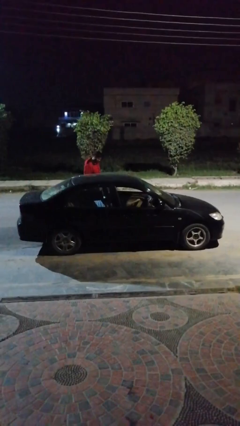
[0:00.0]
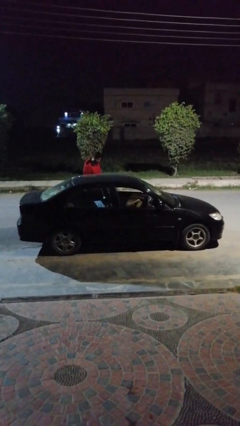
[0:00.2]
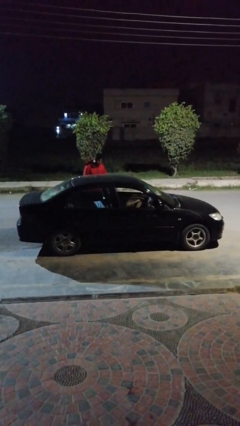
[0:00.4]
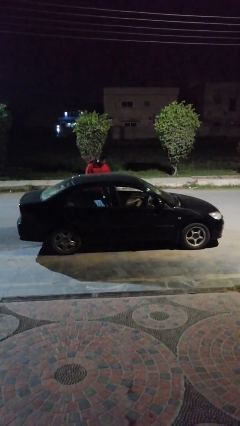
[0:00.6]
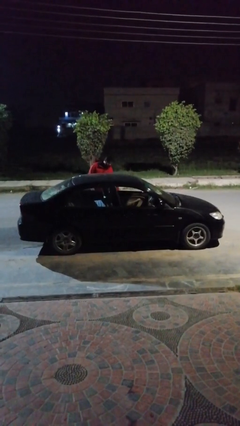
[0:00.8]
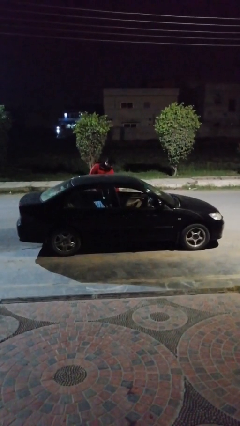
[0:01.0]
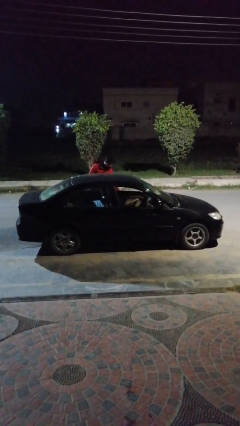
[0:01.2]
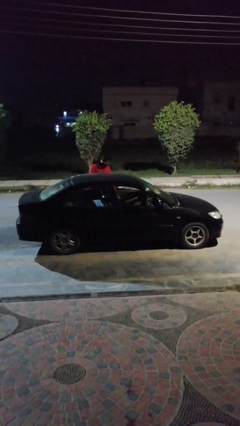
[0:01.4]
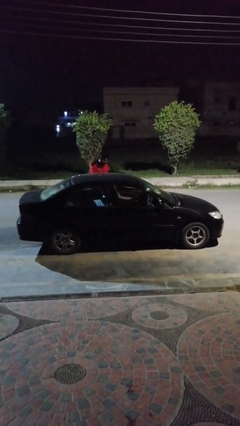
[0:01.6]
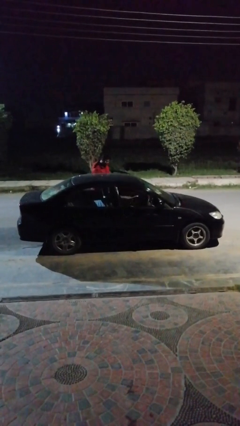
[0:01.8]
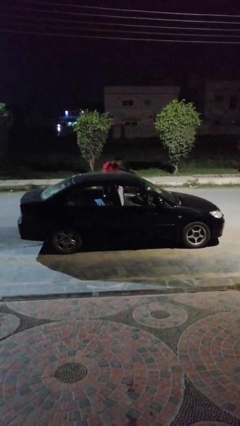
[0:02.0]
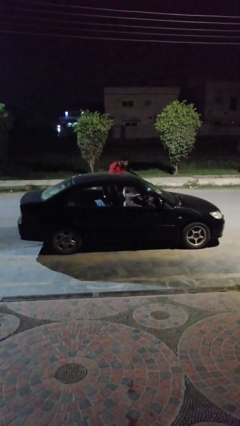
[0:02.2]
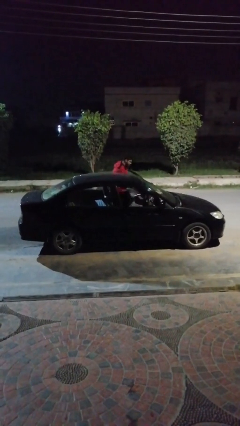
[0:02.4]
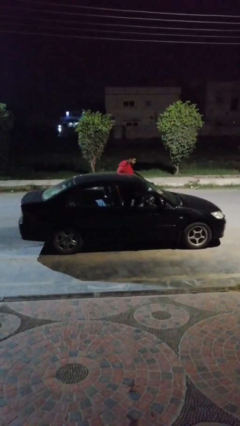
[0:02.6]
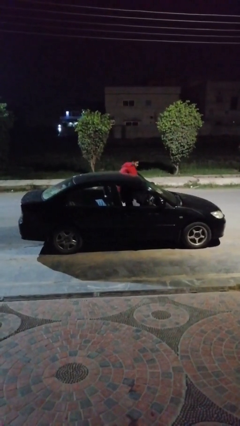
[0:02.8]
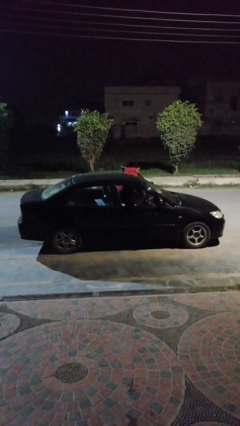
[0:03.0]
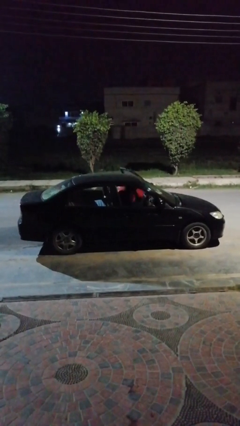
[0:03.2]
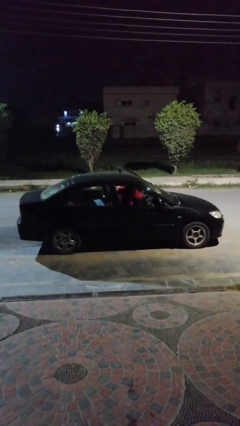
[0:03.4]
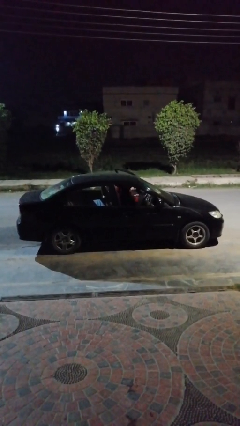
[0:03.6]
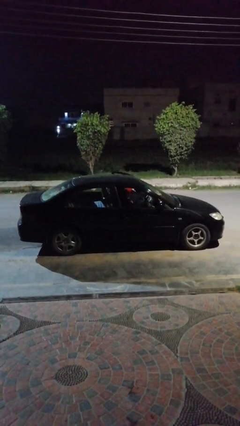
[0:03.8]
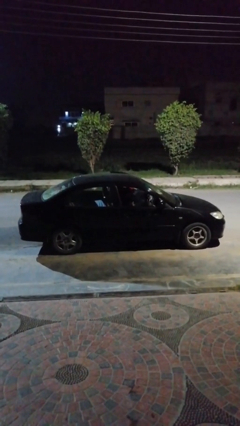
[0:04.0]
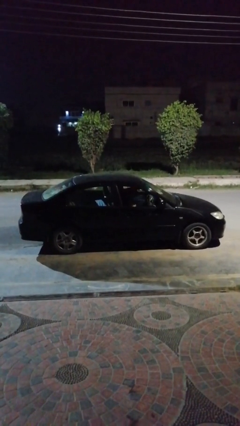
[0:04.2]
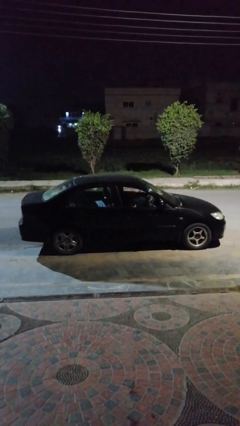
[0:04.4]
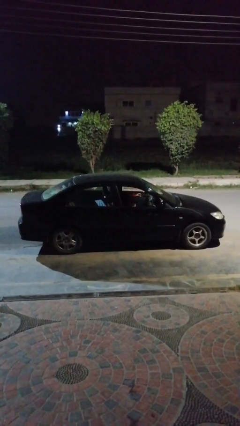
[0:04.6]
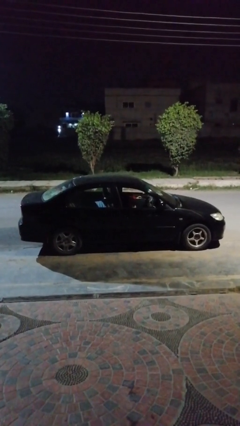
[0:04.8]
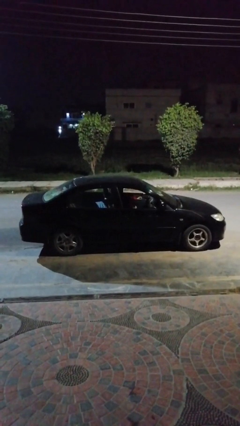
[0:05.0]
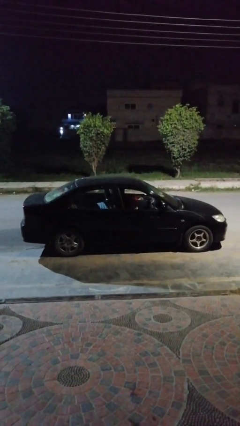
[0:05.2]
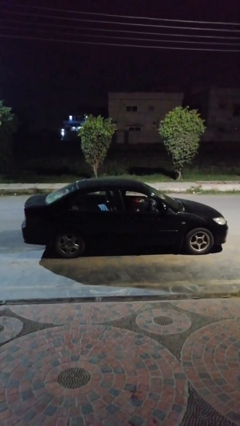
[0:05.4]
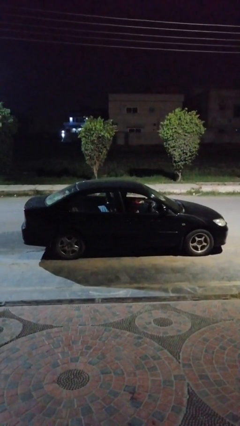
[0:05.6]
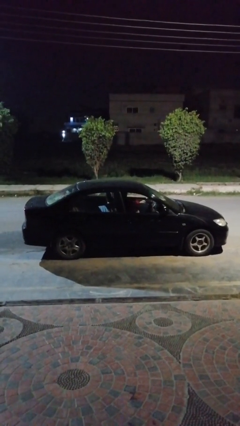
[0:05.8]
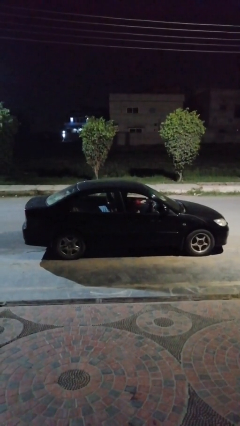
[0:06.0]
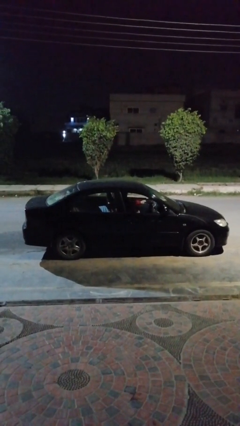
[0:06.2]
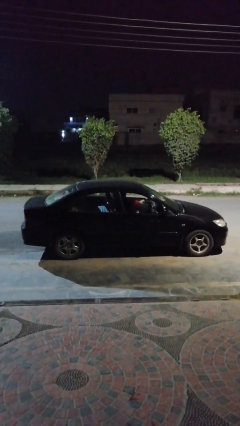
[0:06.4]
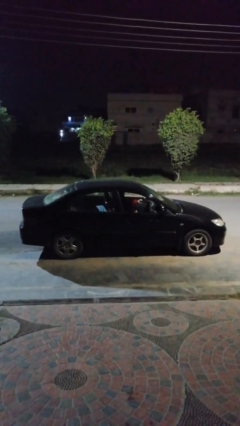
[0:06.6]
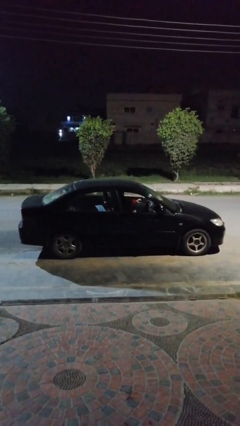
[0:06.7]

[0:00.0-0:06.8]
car picks up person

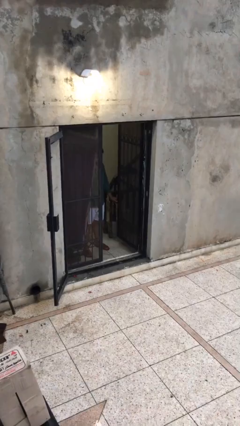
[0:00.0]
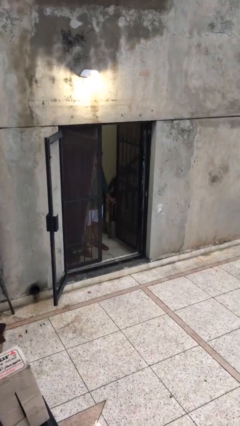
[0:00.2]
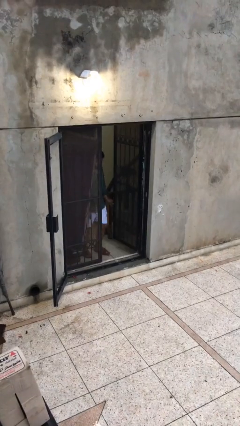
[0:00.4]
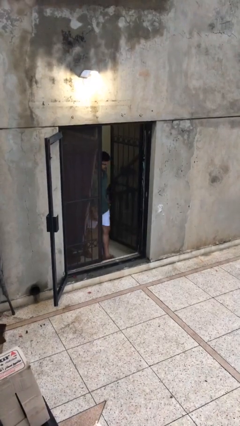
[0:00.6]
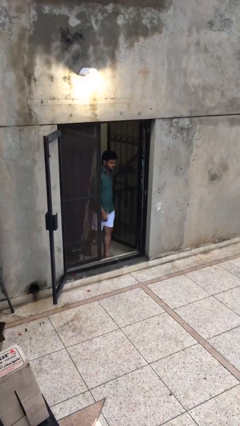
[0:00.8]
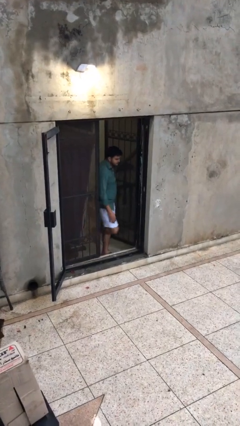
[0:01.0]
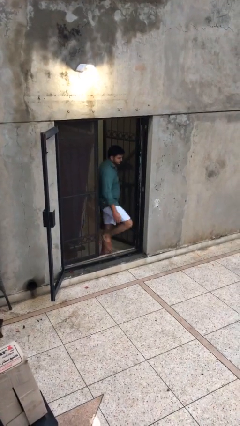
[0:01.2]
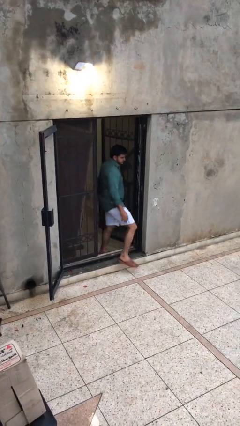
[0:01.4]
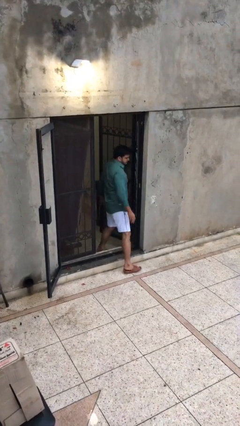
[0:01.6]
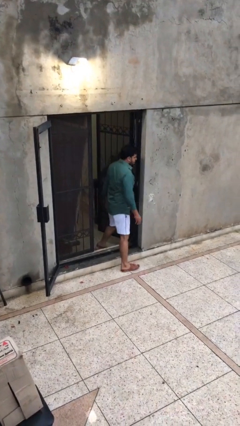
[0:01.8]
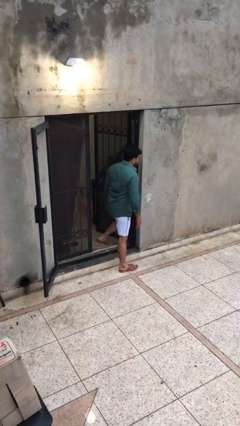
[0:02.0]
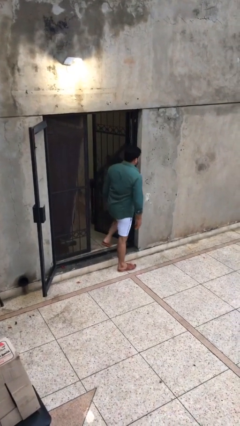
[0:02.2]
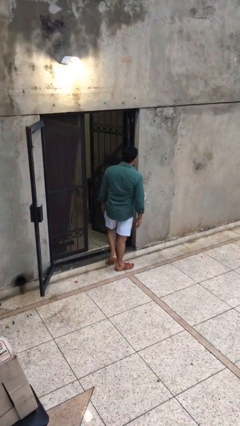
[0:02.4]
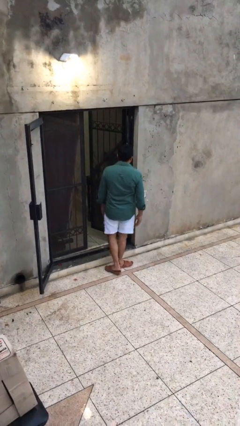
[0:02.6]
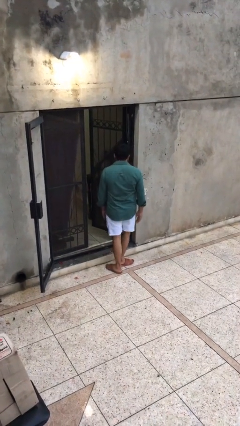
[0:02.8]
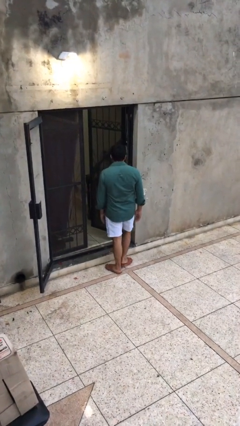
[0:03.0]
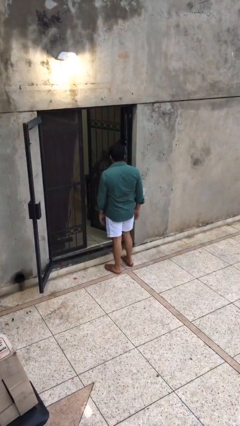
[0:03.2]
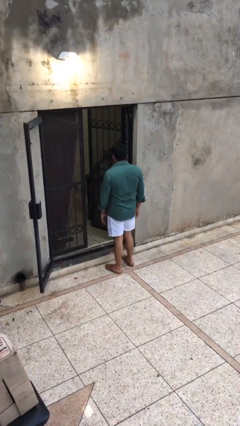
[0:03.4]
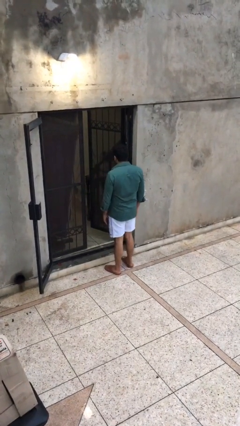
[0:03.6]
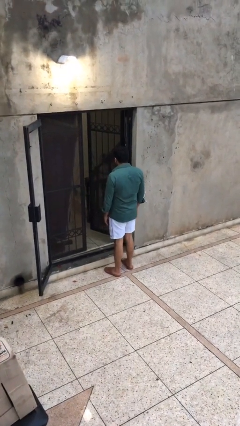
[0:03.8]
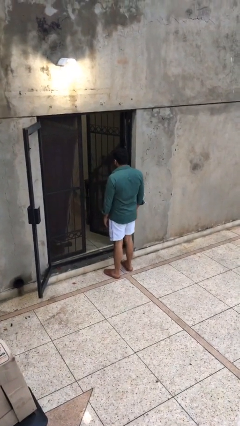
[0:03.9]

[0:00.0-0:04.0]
person enters scene through structure

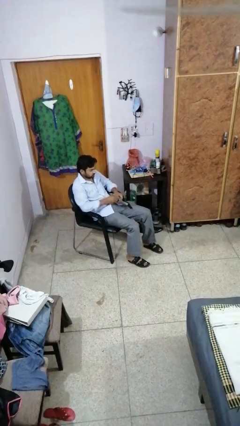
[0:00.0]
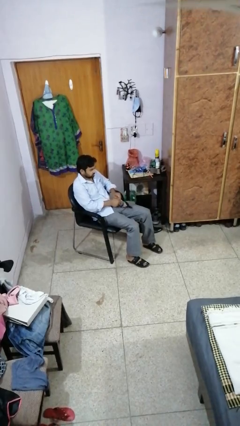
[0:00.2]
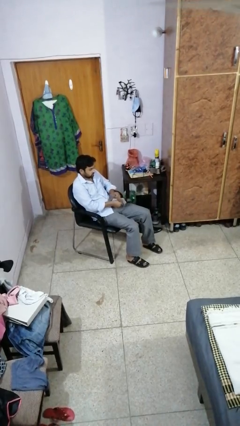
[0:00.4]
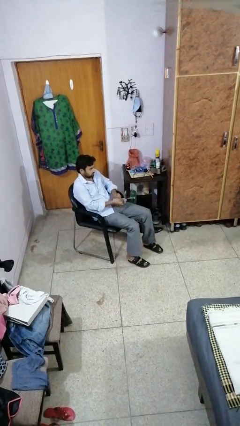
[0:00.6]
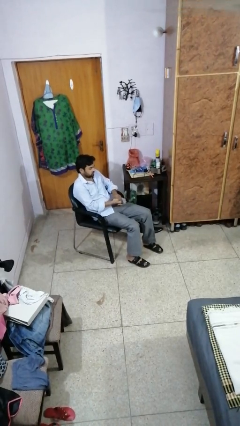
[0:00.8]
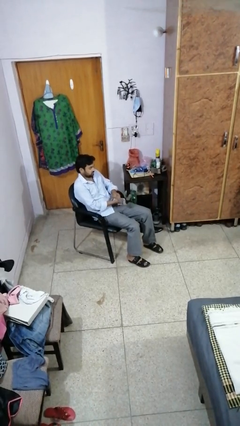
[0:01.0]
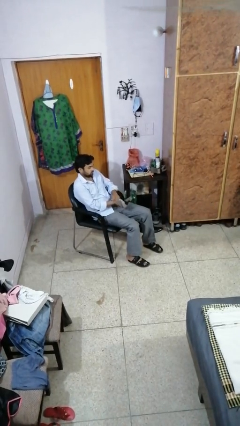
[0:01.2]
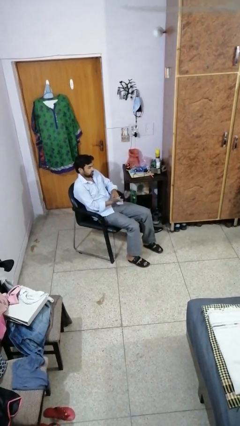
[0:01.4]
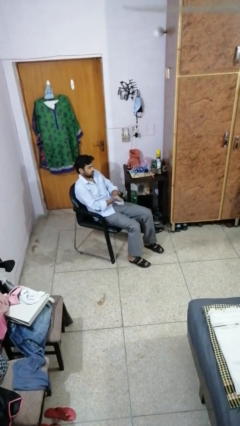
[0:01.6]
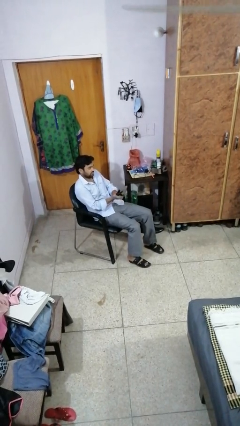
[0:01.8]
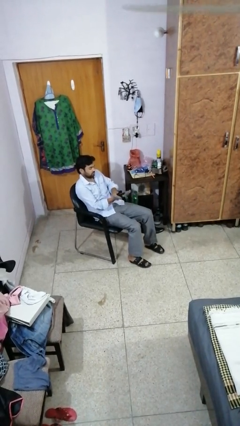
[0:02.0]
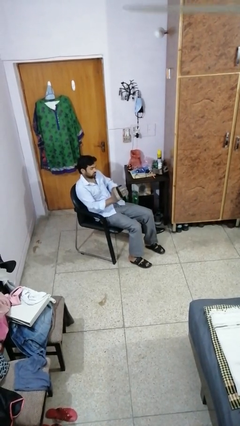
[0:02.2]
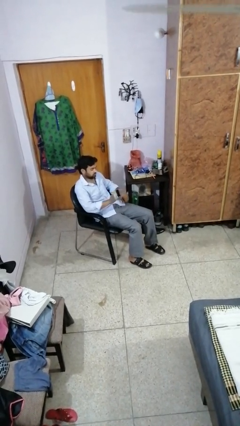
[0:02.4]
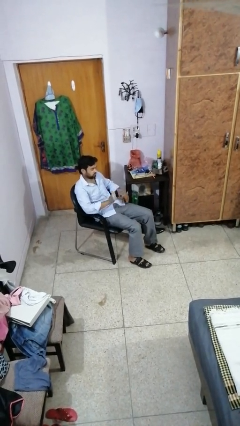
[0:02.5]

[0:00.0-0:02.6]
person puts on gloves

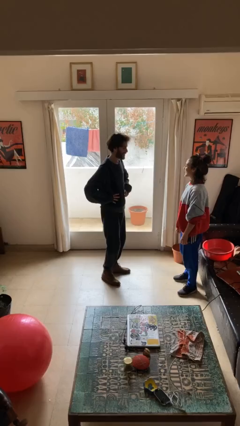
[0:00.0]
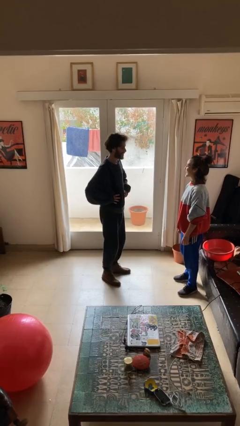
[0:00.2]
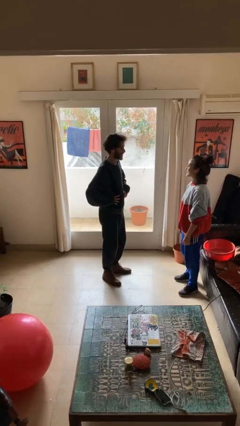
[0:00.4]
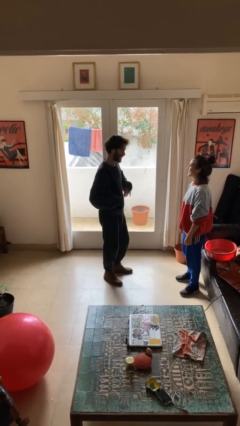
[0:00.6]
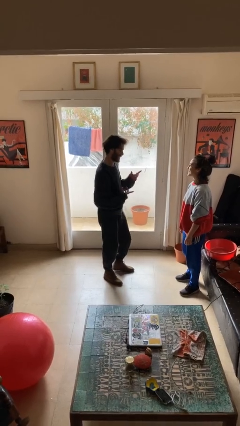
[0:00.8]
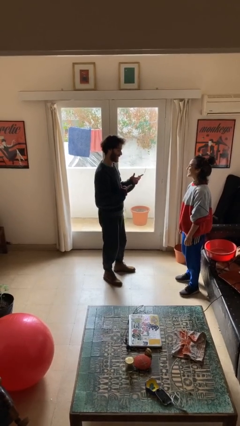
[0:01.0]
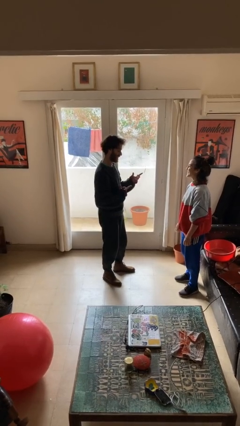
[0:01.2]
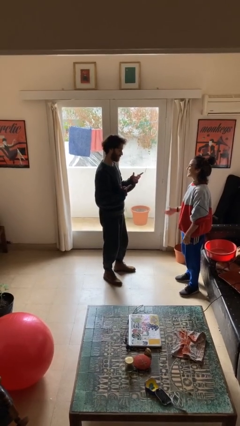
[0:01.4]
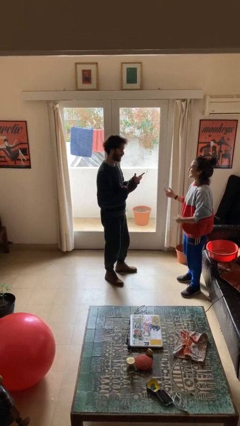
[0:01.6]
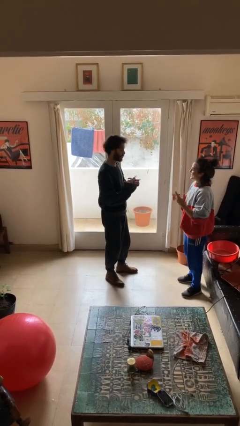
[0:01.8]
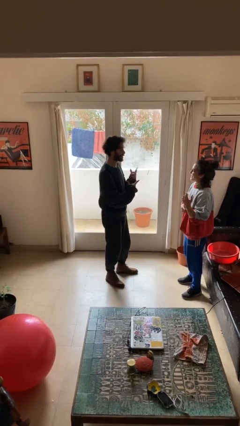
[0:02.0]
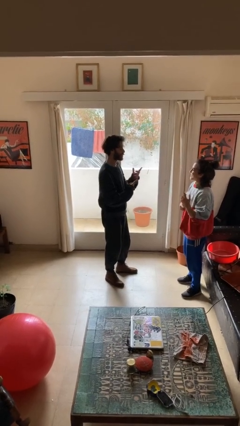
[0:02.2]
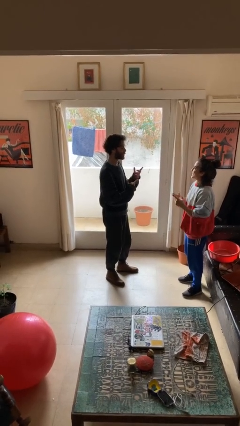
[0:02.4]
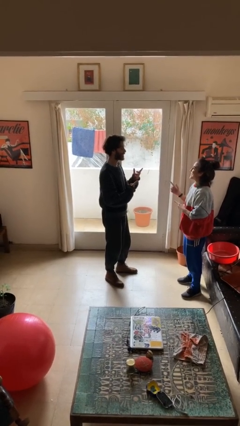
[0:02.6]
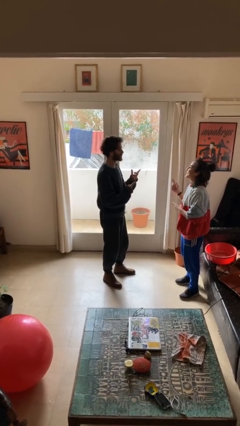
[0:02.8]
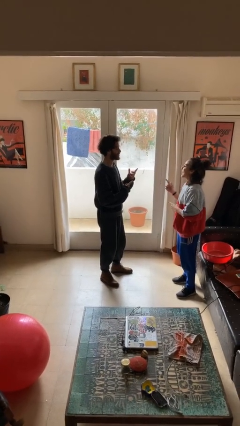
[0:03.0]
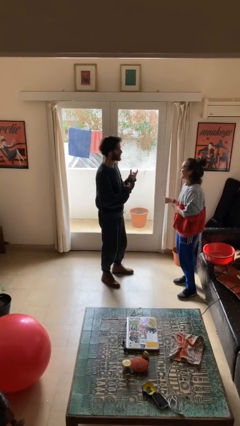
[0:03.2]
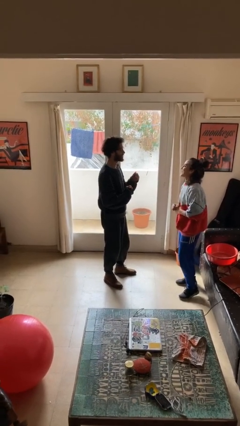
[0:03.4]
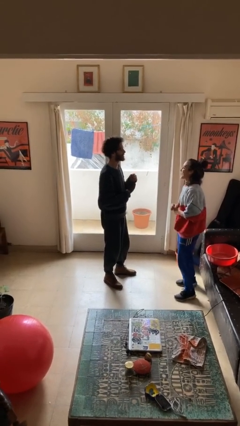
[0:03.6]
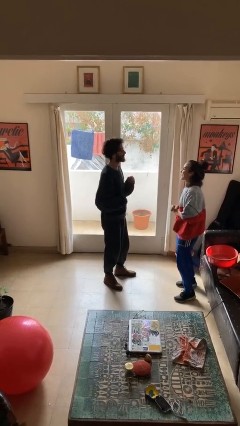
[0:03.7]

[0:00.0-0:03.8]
person talks to person

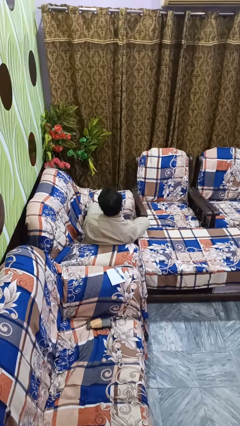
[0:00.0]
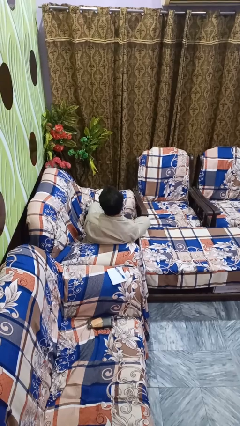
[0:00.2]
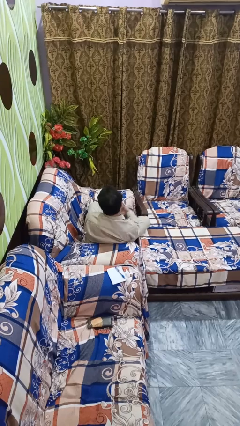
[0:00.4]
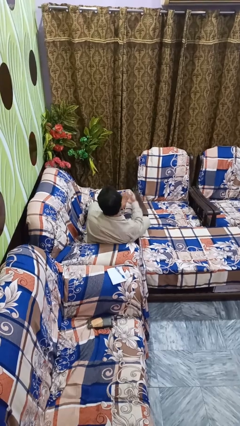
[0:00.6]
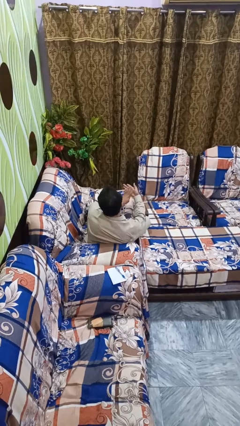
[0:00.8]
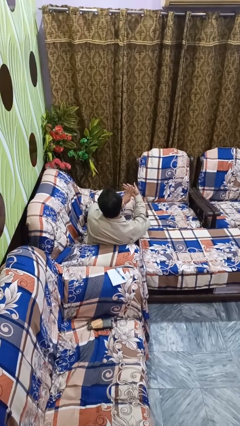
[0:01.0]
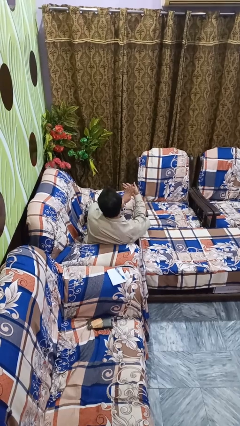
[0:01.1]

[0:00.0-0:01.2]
person gestures number four
